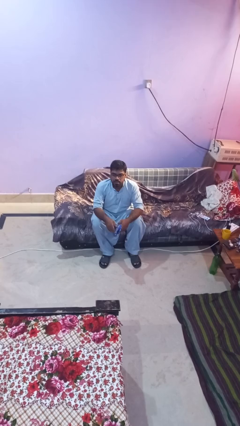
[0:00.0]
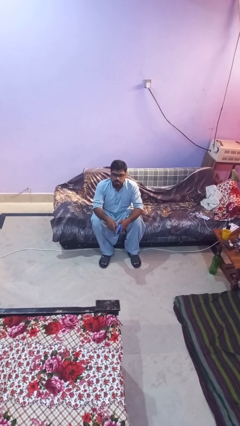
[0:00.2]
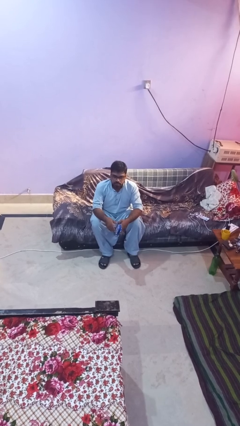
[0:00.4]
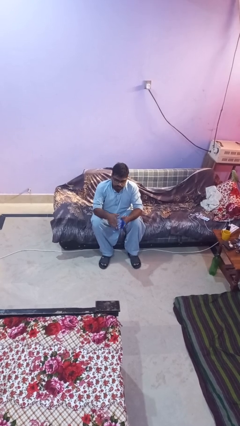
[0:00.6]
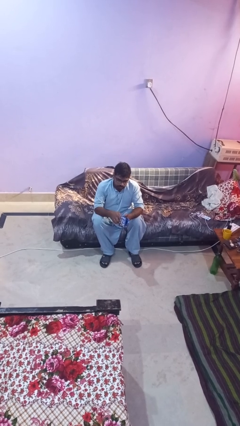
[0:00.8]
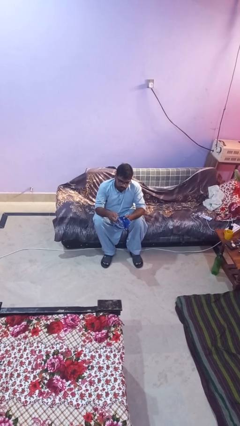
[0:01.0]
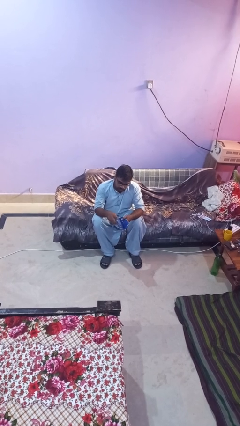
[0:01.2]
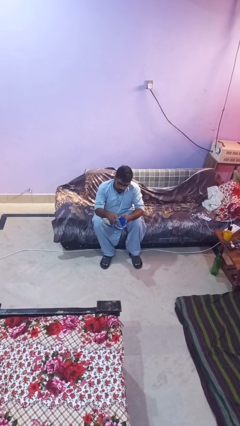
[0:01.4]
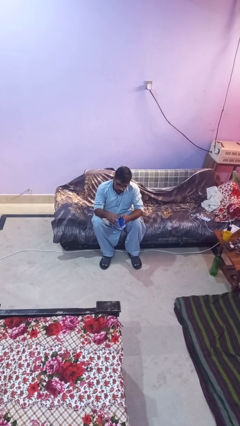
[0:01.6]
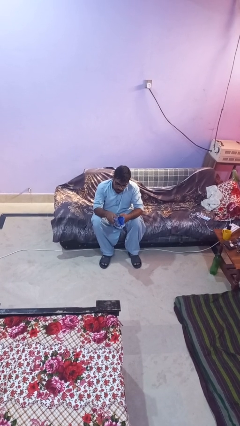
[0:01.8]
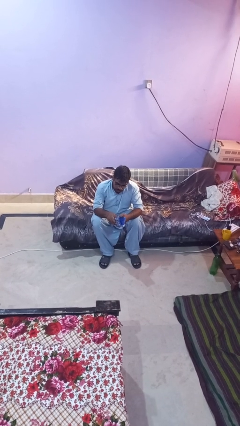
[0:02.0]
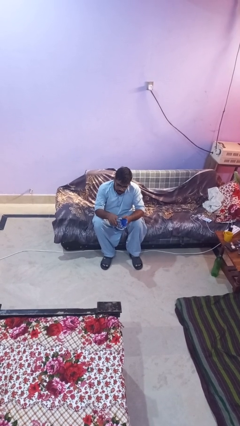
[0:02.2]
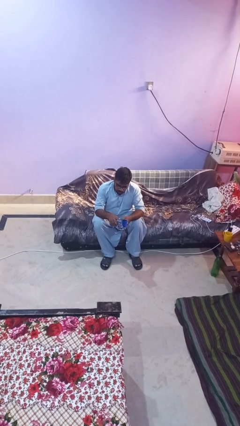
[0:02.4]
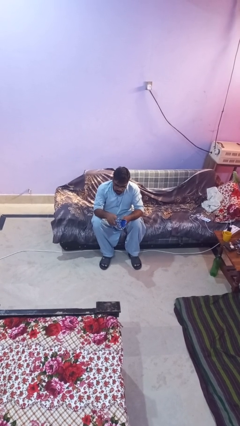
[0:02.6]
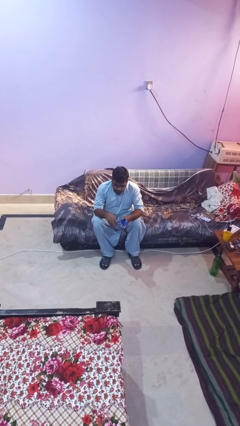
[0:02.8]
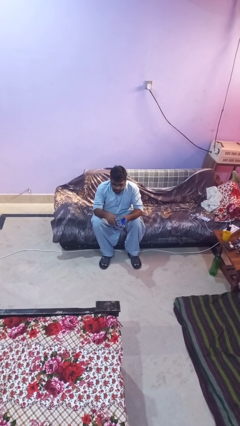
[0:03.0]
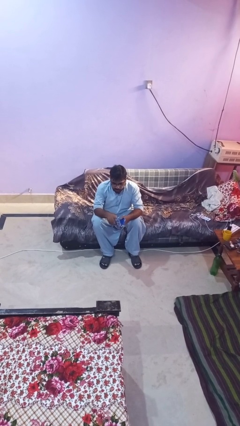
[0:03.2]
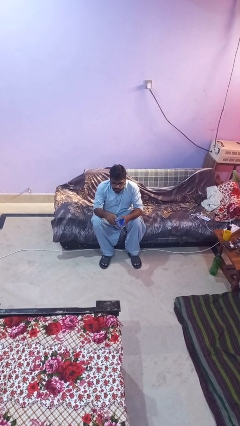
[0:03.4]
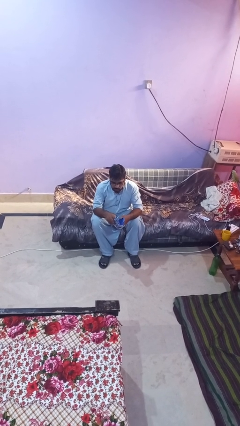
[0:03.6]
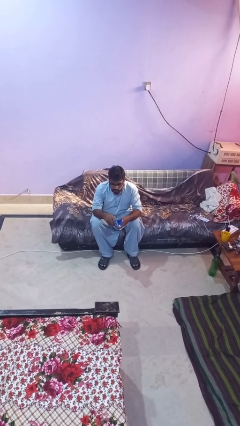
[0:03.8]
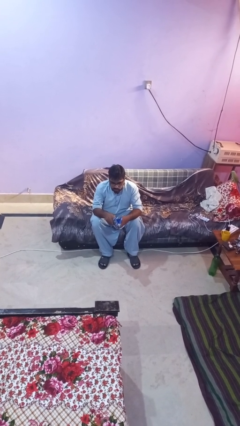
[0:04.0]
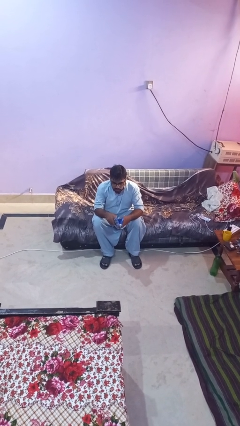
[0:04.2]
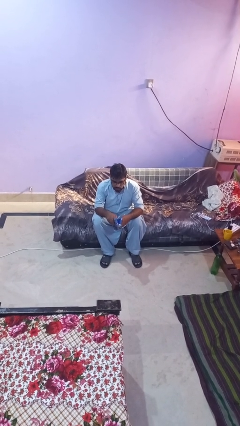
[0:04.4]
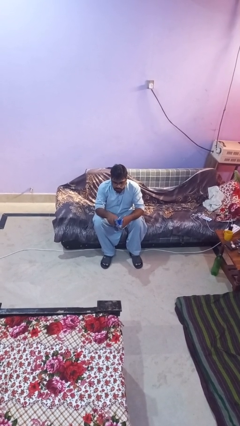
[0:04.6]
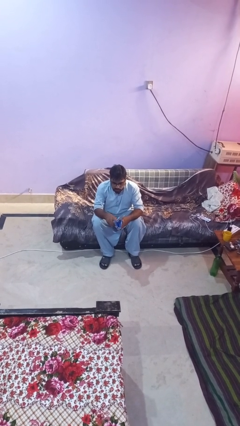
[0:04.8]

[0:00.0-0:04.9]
person searches in purse

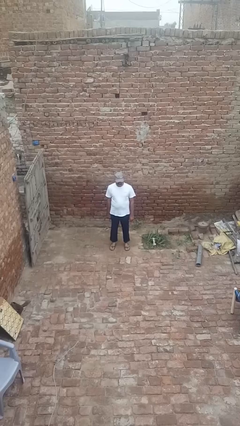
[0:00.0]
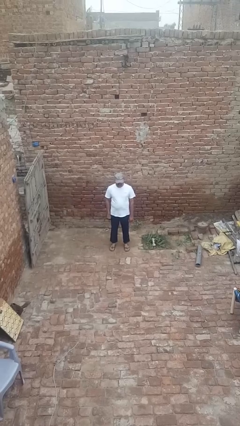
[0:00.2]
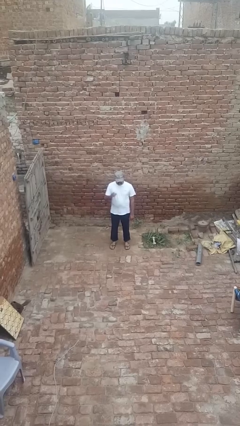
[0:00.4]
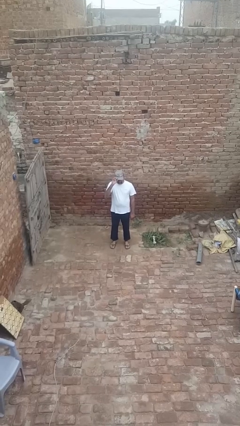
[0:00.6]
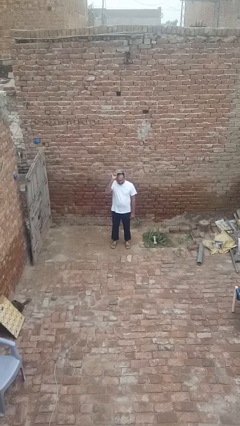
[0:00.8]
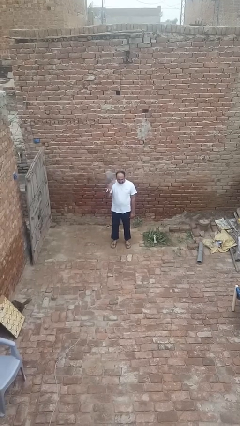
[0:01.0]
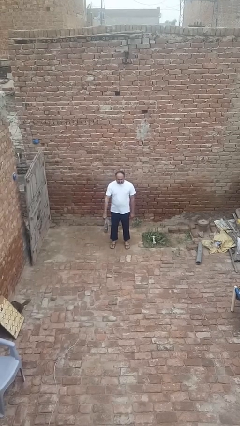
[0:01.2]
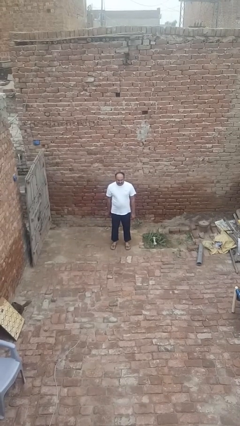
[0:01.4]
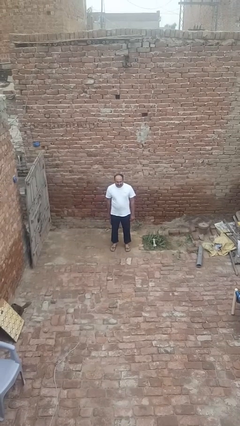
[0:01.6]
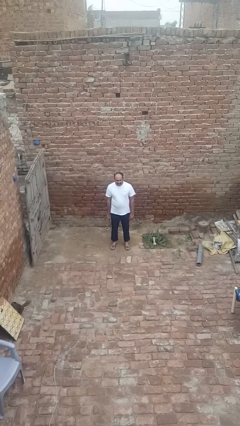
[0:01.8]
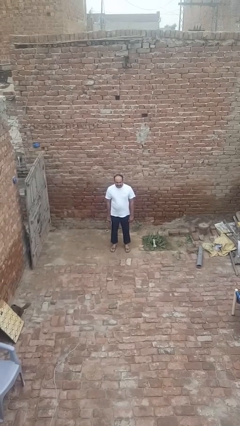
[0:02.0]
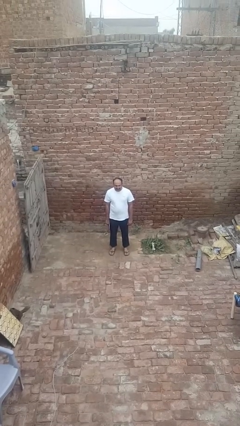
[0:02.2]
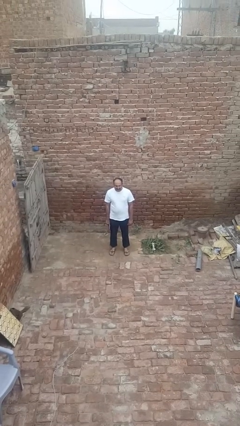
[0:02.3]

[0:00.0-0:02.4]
person takes off hat

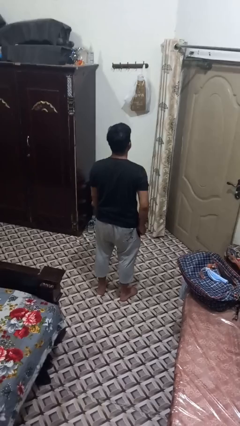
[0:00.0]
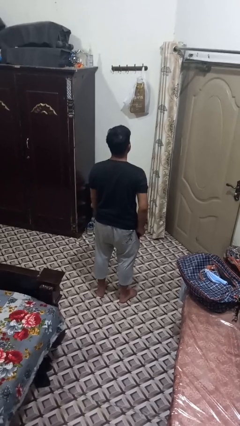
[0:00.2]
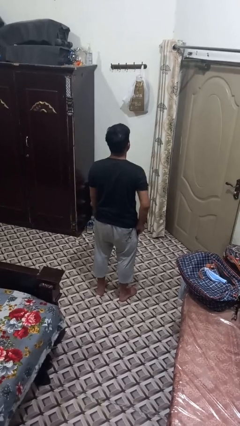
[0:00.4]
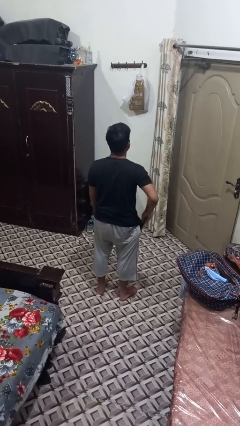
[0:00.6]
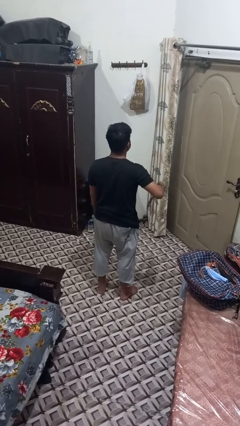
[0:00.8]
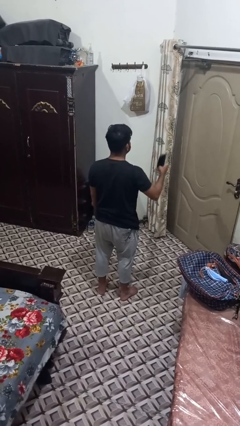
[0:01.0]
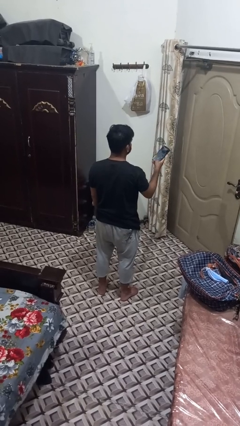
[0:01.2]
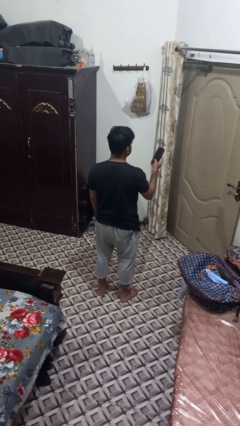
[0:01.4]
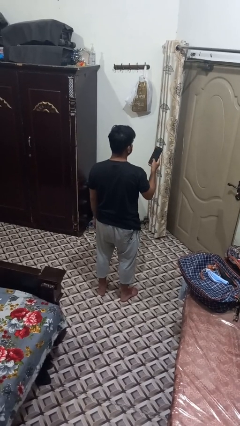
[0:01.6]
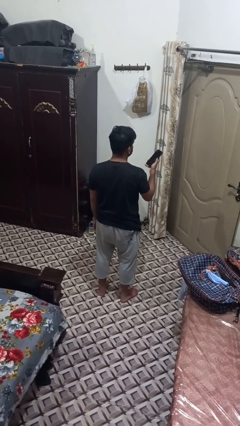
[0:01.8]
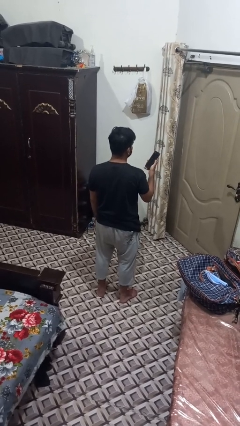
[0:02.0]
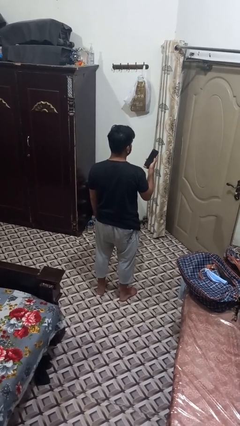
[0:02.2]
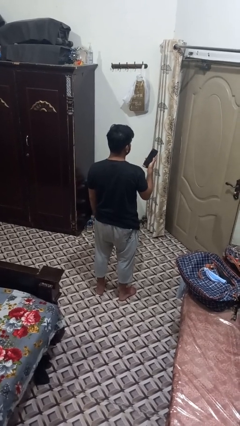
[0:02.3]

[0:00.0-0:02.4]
person takes phone from pocket

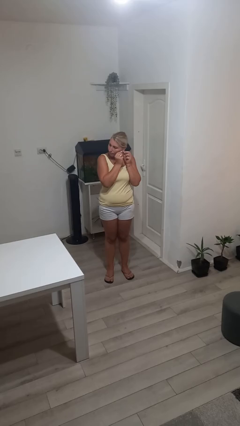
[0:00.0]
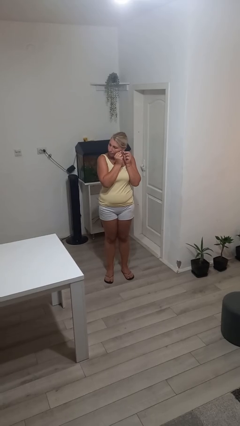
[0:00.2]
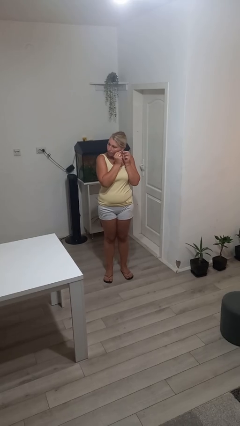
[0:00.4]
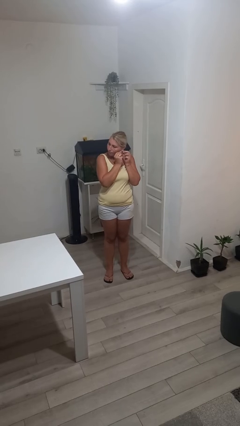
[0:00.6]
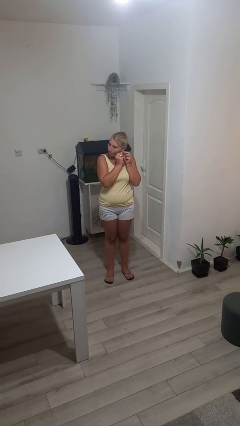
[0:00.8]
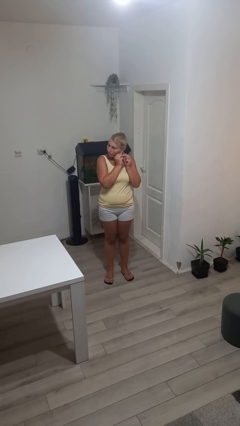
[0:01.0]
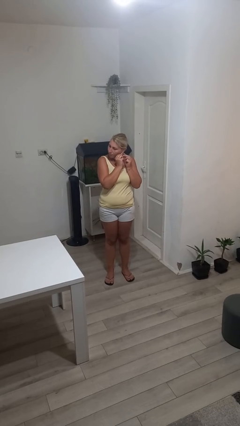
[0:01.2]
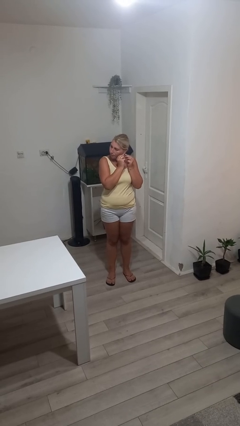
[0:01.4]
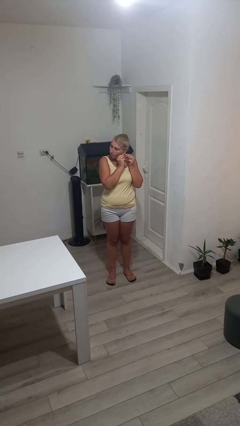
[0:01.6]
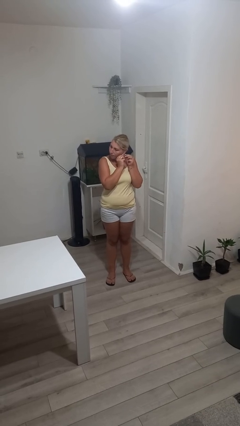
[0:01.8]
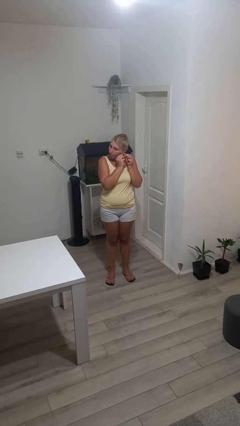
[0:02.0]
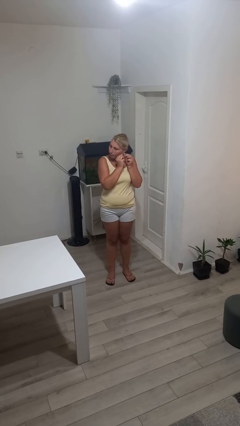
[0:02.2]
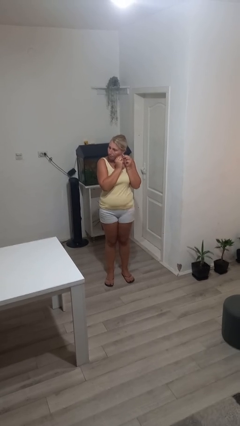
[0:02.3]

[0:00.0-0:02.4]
person puts on earrings

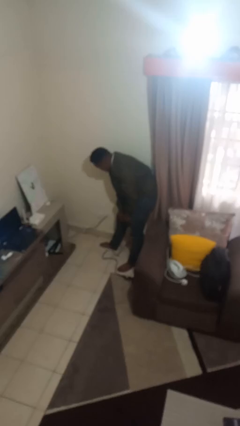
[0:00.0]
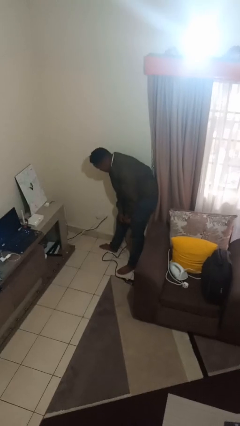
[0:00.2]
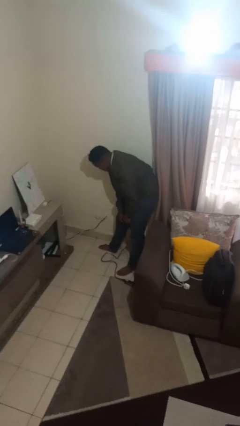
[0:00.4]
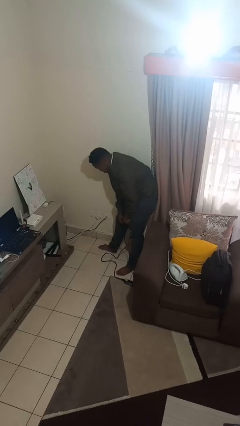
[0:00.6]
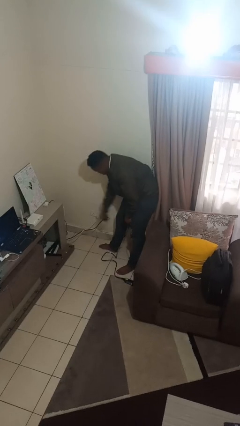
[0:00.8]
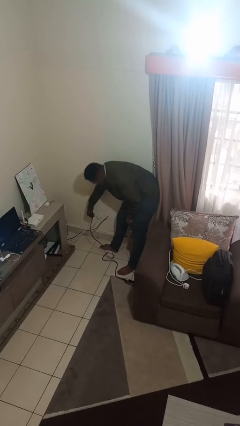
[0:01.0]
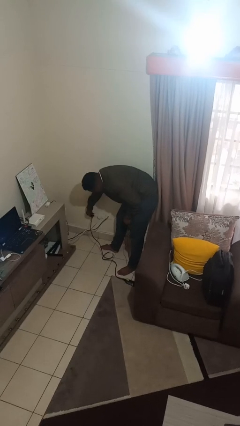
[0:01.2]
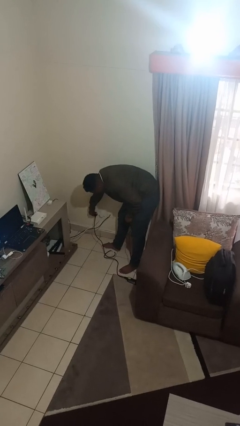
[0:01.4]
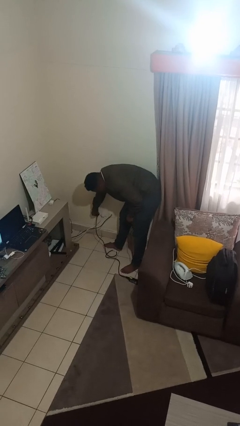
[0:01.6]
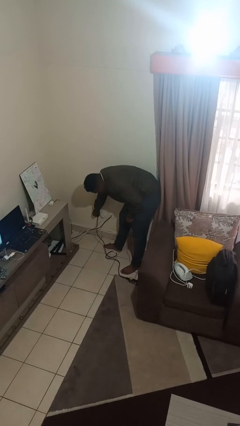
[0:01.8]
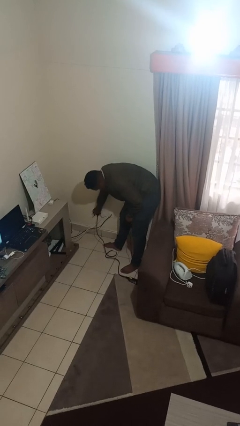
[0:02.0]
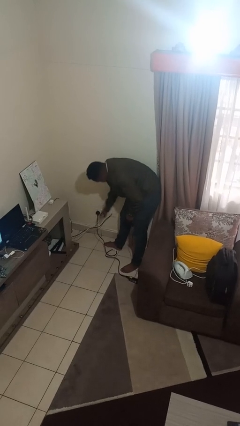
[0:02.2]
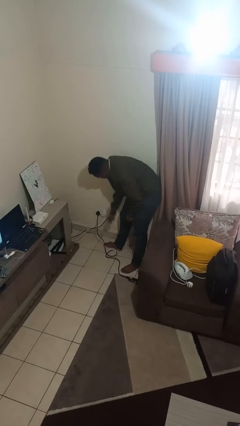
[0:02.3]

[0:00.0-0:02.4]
person plugs into electrical socket

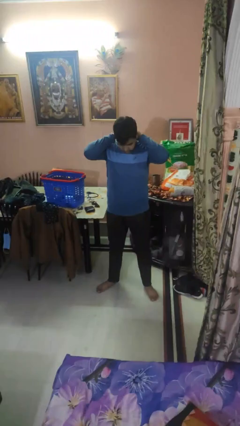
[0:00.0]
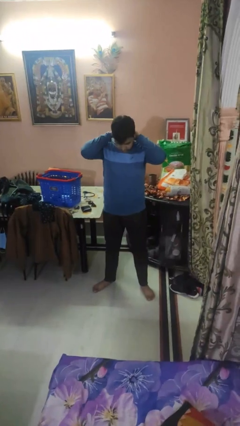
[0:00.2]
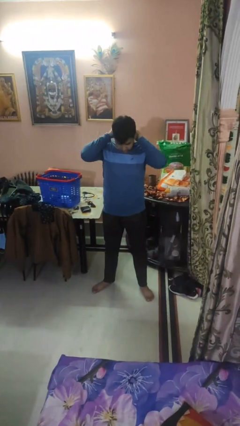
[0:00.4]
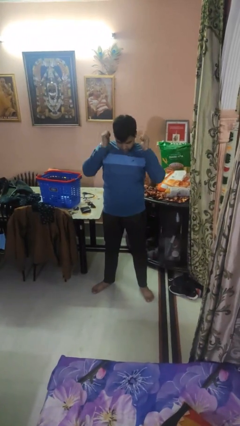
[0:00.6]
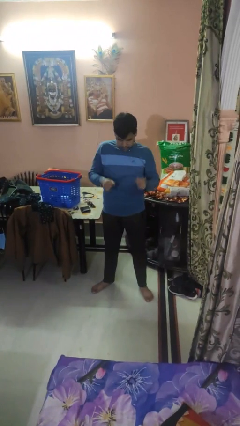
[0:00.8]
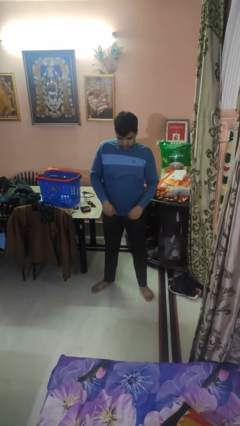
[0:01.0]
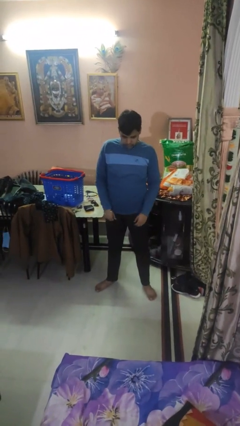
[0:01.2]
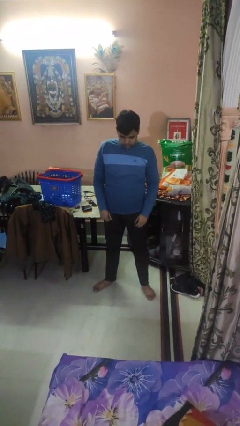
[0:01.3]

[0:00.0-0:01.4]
person puts on necklace

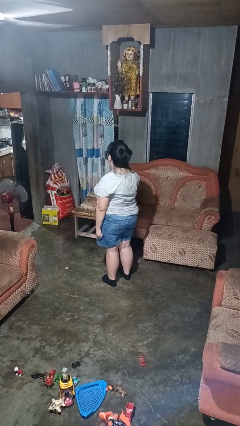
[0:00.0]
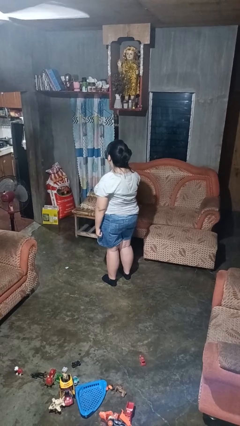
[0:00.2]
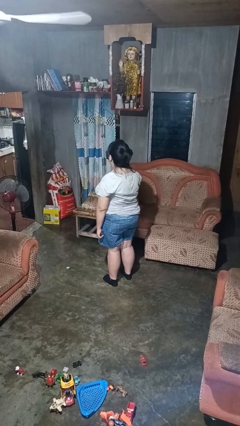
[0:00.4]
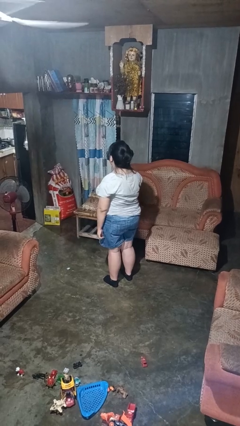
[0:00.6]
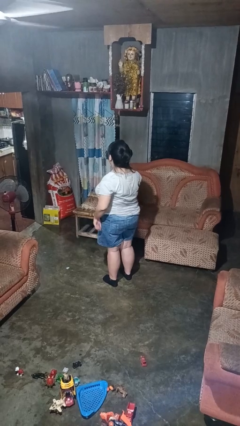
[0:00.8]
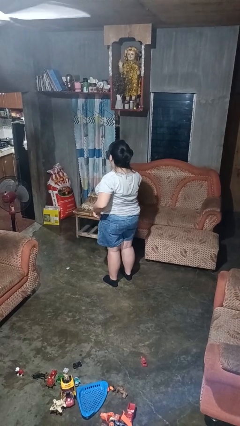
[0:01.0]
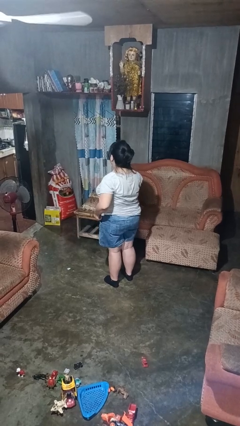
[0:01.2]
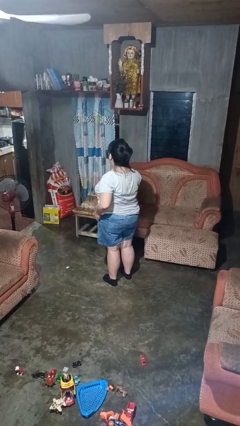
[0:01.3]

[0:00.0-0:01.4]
person puts hands in back pockets

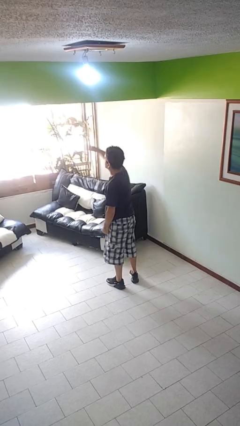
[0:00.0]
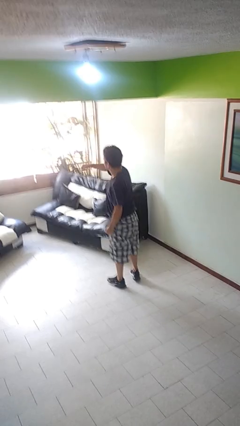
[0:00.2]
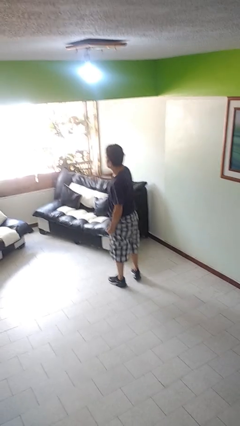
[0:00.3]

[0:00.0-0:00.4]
person punches
